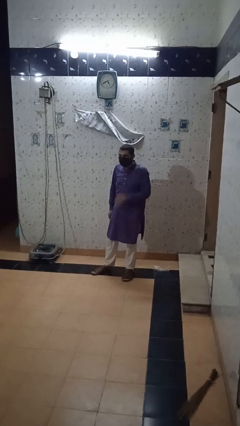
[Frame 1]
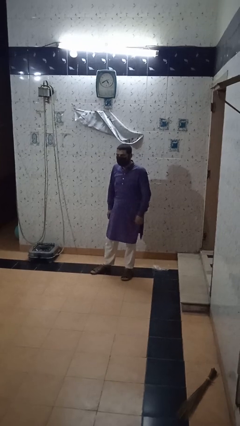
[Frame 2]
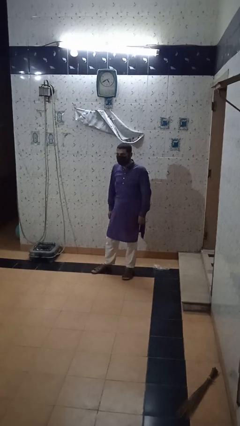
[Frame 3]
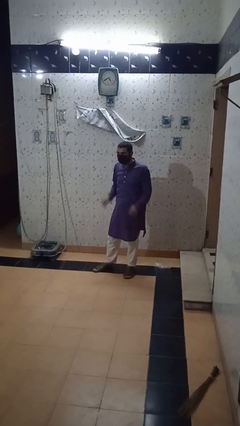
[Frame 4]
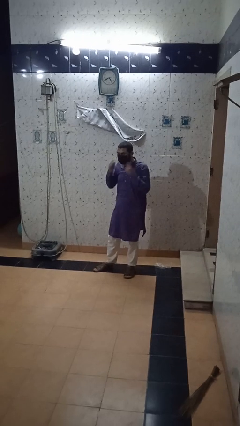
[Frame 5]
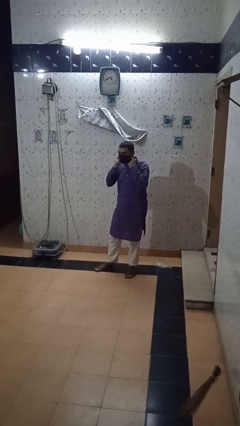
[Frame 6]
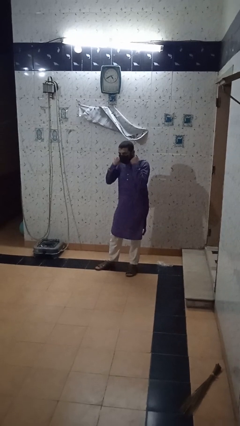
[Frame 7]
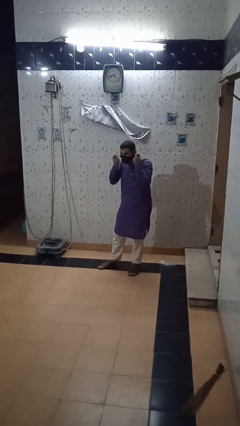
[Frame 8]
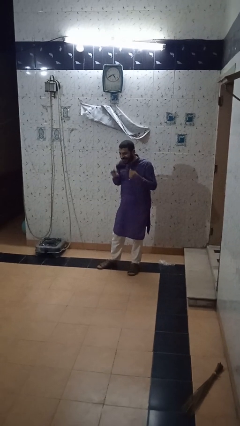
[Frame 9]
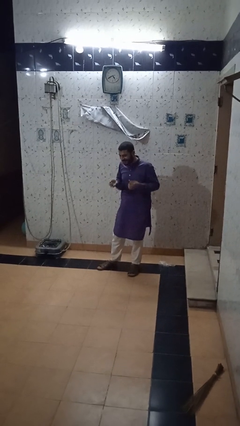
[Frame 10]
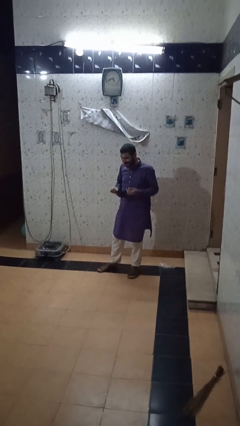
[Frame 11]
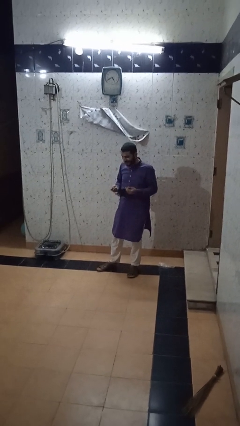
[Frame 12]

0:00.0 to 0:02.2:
person takes off facemask

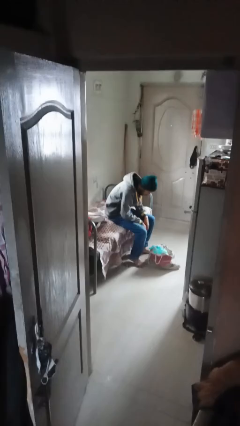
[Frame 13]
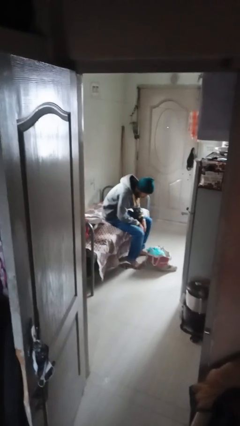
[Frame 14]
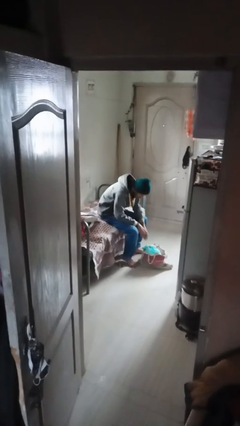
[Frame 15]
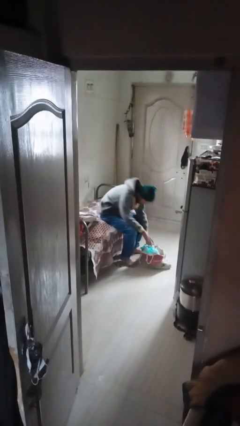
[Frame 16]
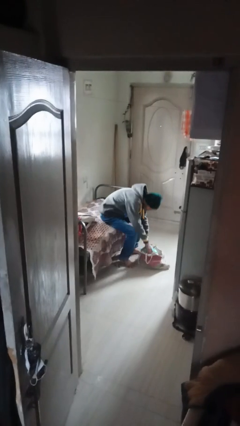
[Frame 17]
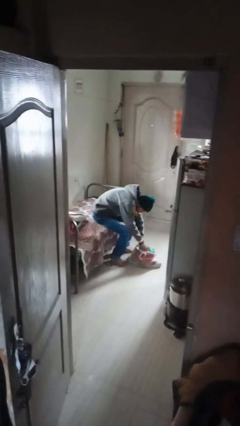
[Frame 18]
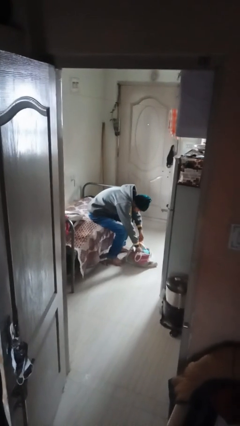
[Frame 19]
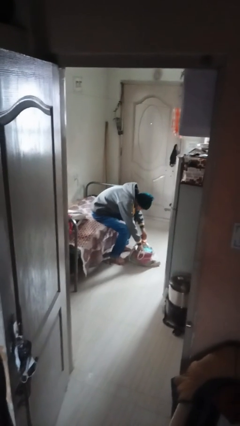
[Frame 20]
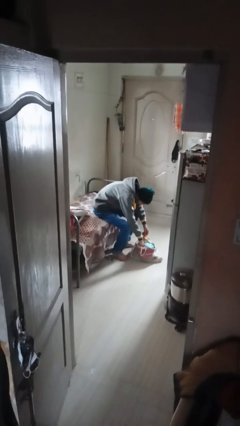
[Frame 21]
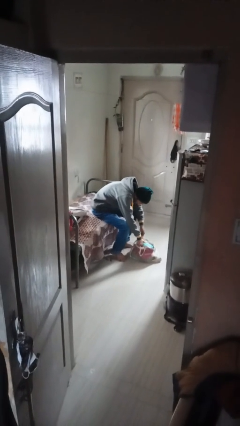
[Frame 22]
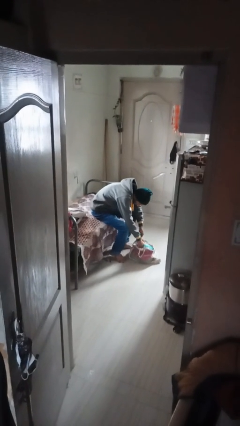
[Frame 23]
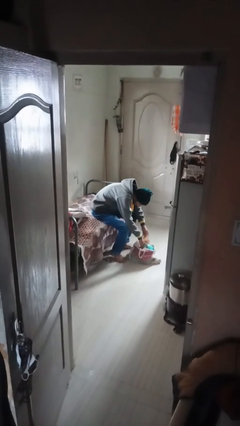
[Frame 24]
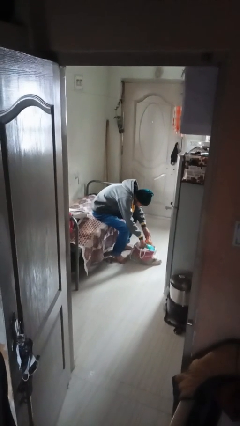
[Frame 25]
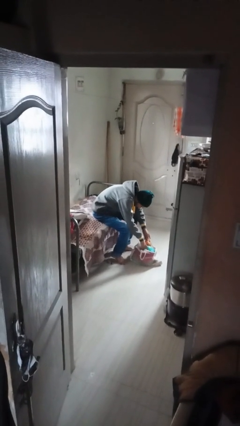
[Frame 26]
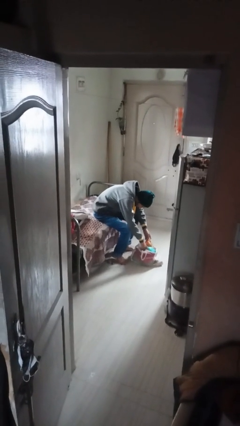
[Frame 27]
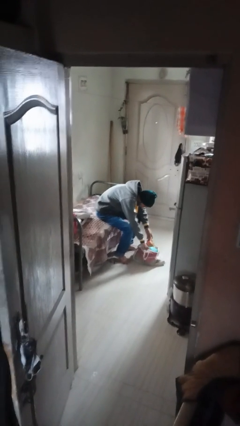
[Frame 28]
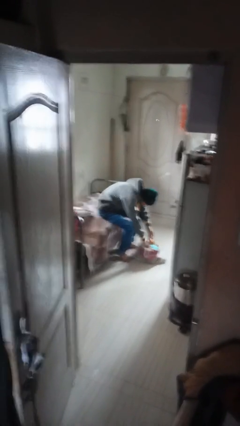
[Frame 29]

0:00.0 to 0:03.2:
person searches in bag

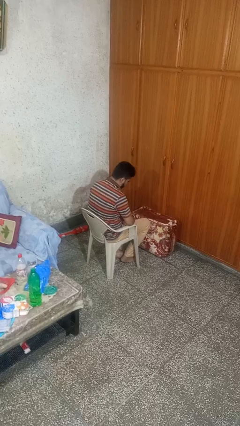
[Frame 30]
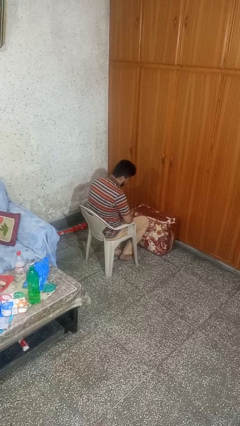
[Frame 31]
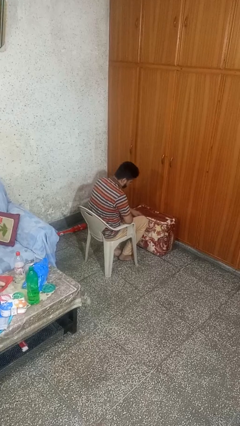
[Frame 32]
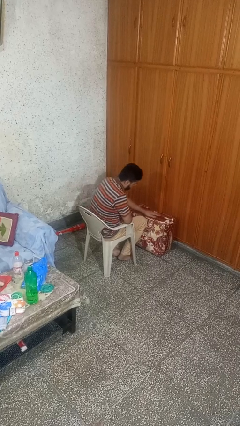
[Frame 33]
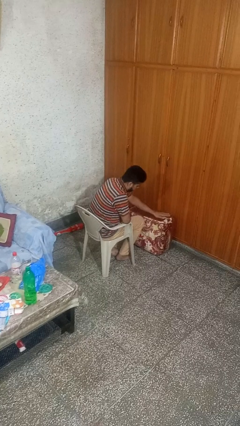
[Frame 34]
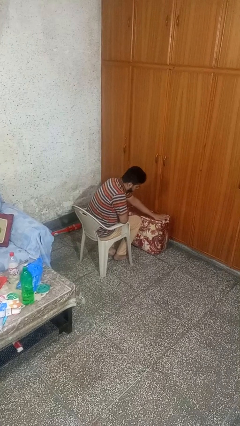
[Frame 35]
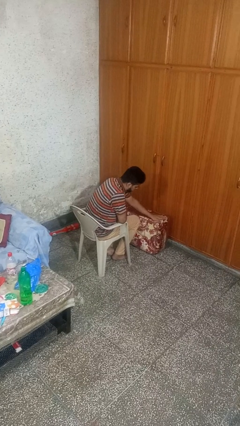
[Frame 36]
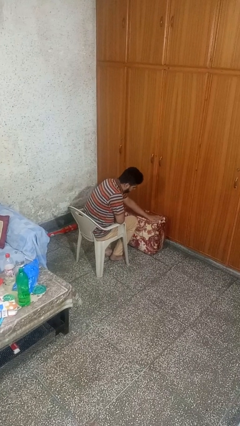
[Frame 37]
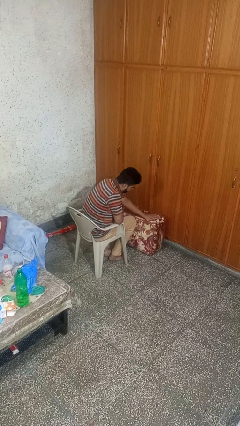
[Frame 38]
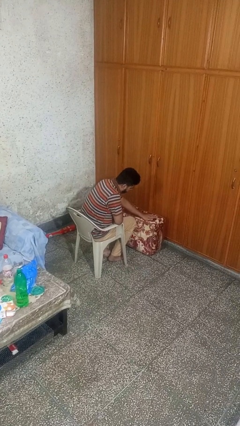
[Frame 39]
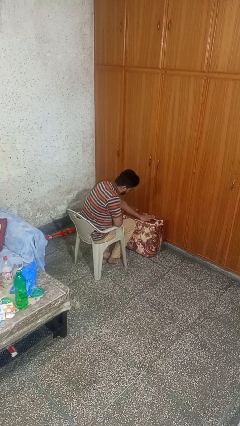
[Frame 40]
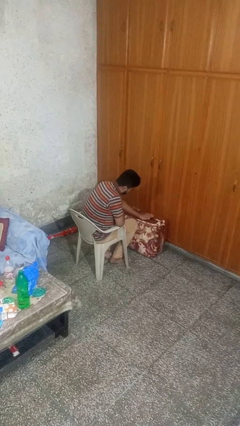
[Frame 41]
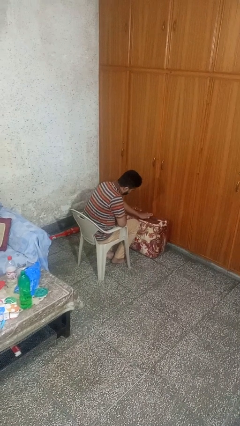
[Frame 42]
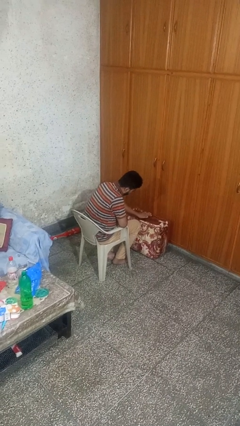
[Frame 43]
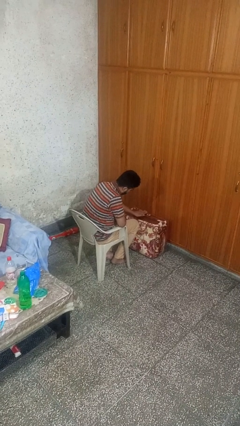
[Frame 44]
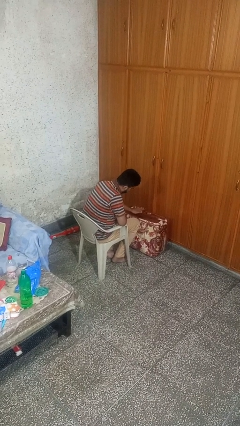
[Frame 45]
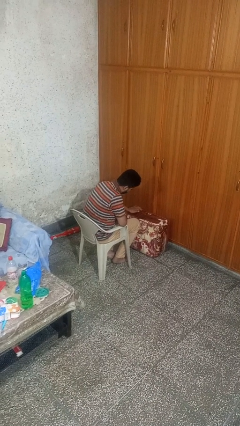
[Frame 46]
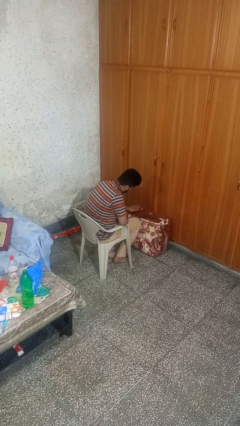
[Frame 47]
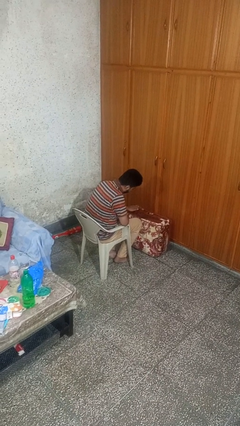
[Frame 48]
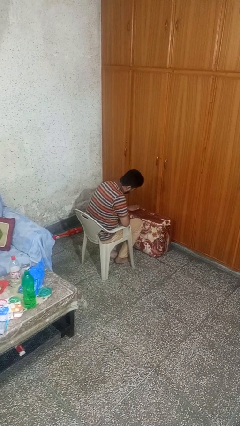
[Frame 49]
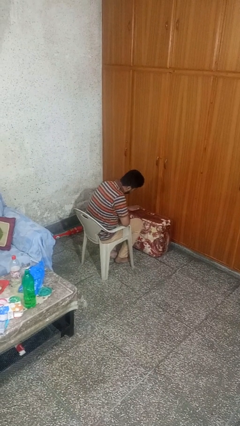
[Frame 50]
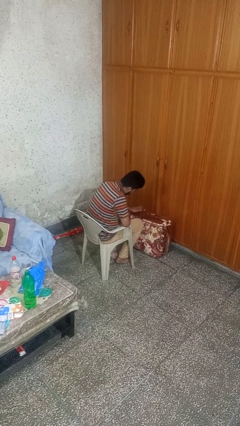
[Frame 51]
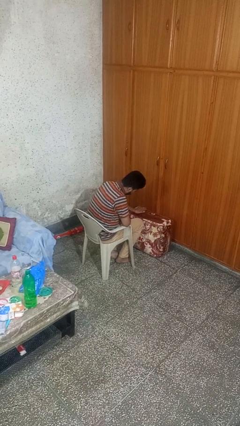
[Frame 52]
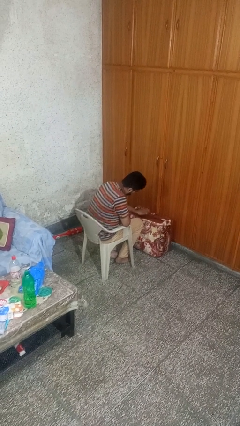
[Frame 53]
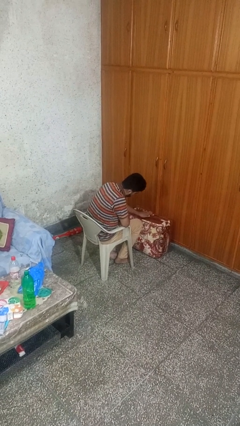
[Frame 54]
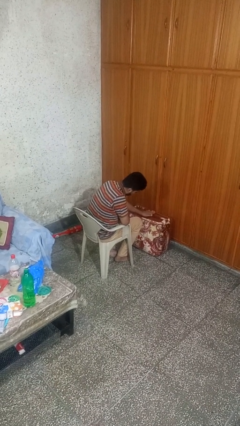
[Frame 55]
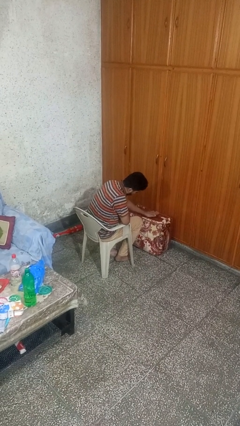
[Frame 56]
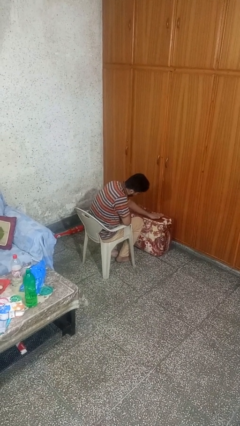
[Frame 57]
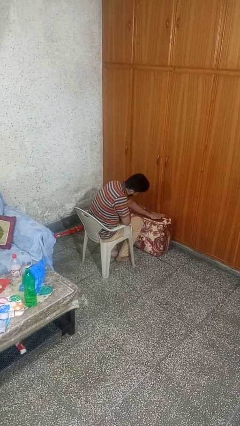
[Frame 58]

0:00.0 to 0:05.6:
person waves hand over object

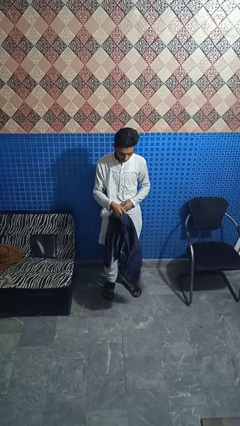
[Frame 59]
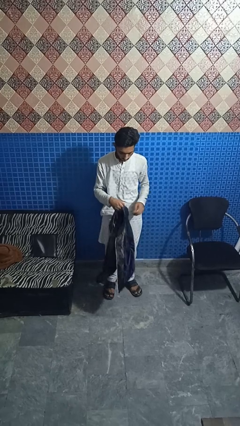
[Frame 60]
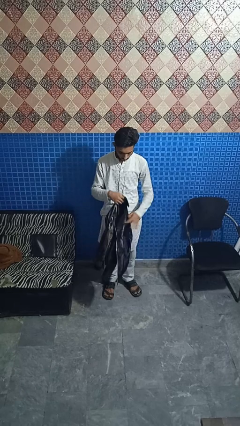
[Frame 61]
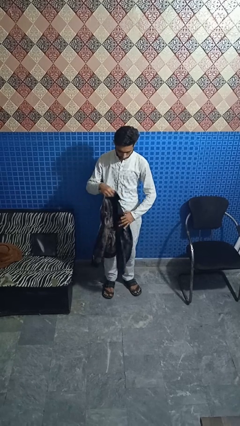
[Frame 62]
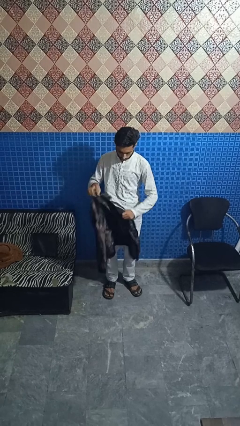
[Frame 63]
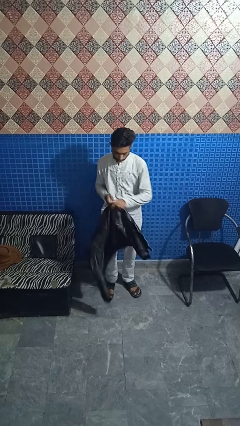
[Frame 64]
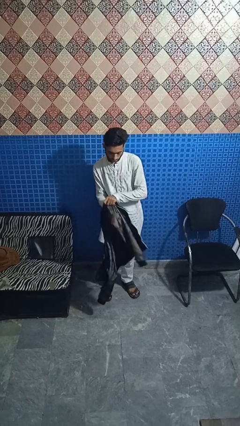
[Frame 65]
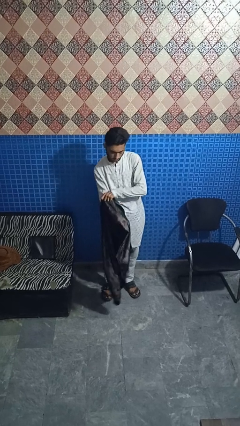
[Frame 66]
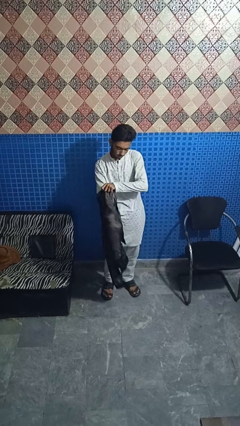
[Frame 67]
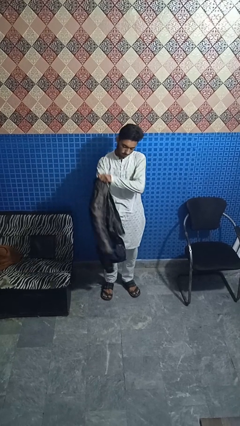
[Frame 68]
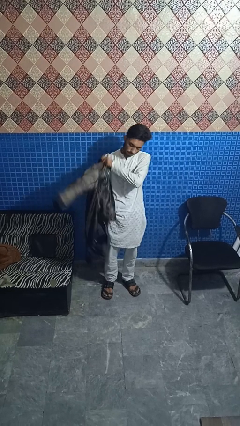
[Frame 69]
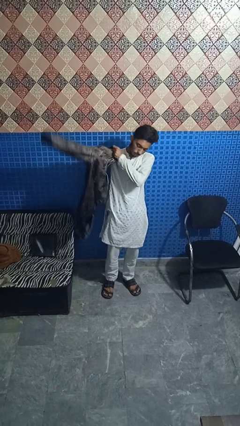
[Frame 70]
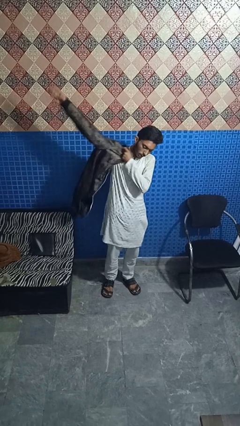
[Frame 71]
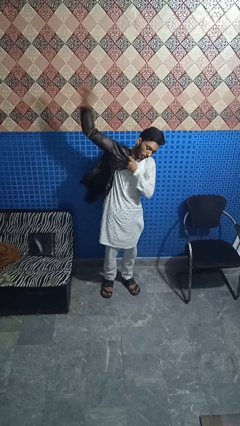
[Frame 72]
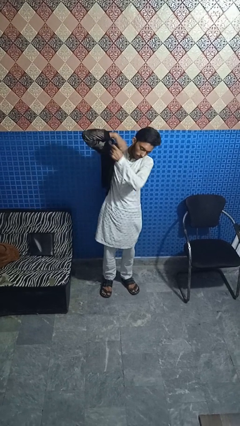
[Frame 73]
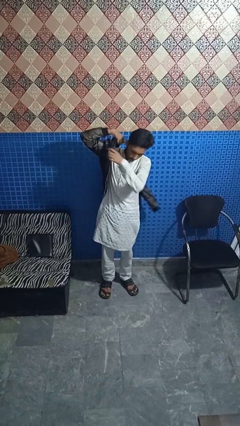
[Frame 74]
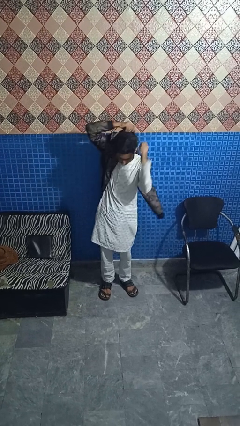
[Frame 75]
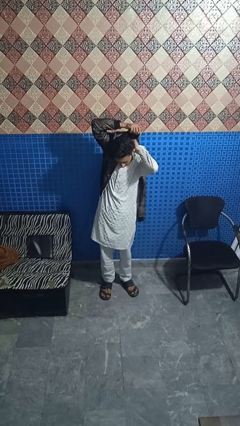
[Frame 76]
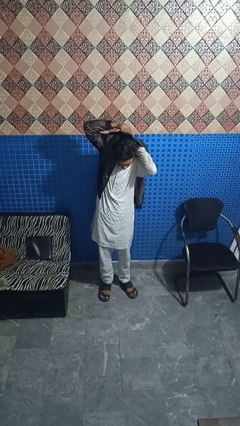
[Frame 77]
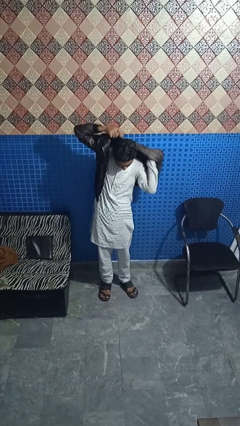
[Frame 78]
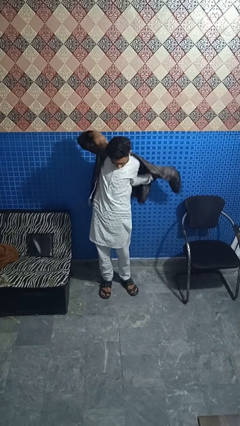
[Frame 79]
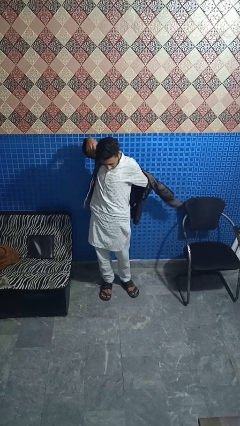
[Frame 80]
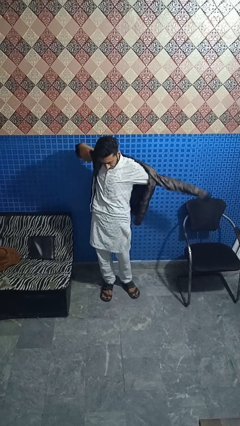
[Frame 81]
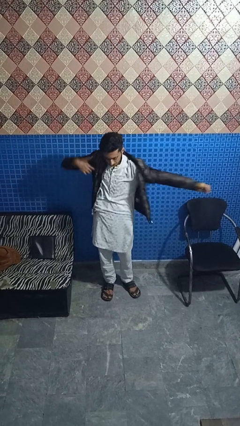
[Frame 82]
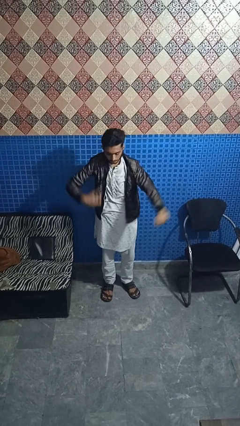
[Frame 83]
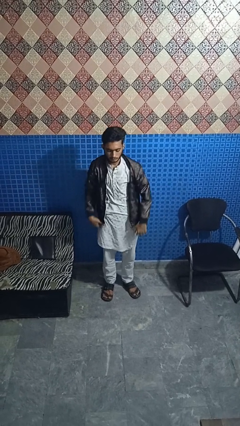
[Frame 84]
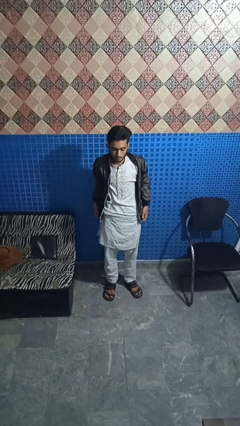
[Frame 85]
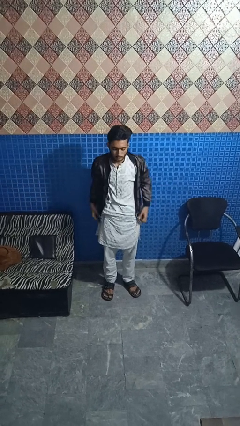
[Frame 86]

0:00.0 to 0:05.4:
person puts on jacket

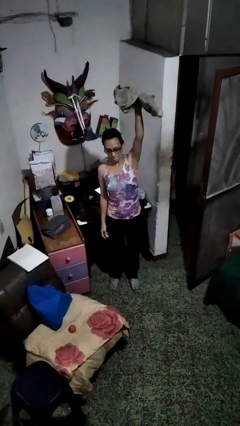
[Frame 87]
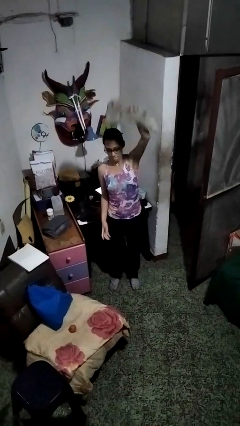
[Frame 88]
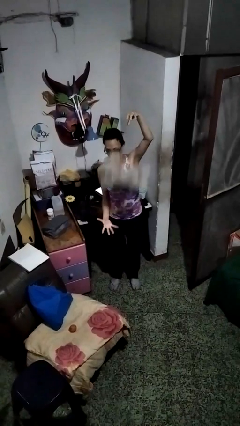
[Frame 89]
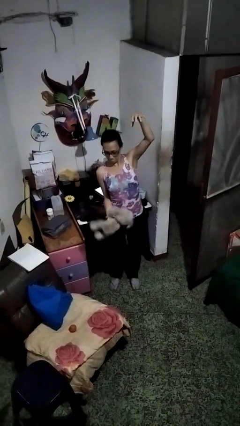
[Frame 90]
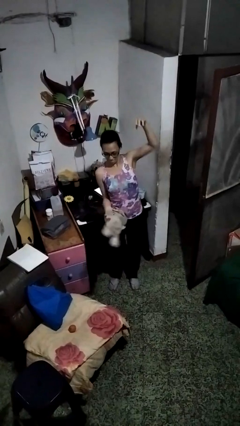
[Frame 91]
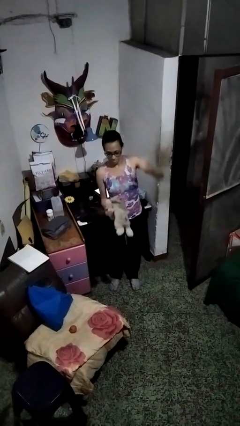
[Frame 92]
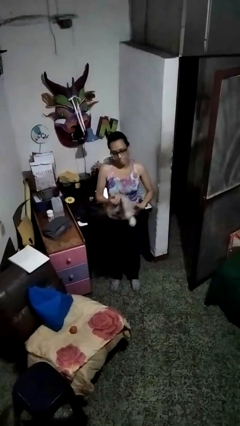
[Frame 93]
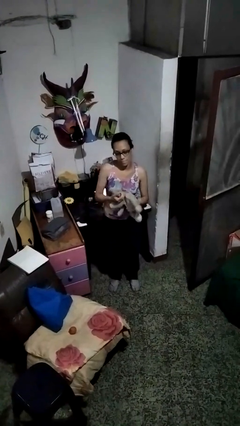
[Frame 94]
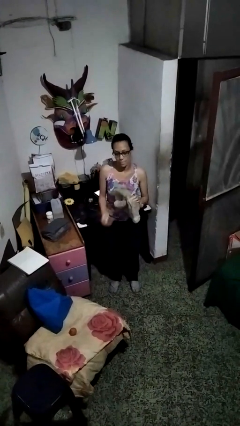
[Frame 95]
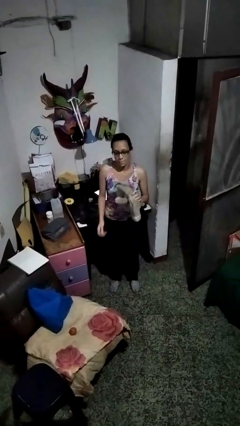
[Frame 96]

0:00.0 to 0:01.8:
person catches dropped object
